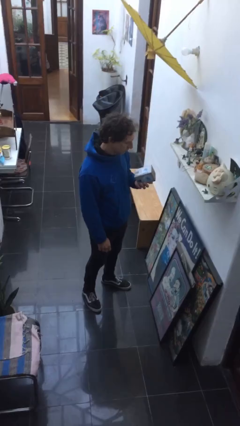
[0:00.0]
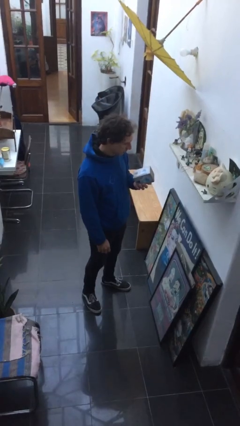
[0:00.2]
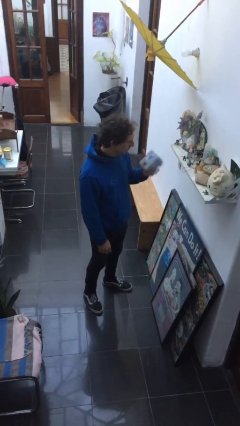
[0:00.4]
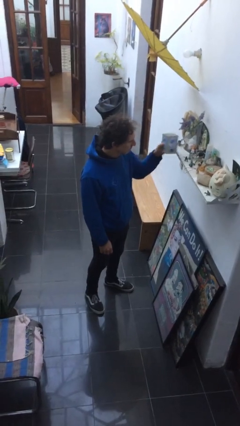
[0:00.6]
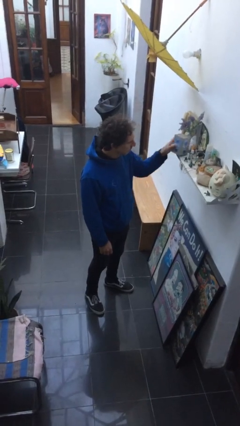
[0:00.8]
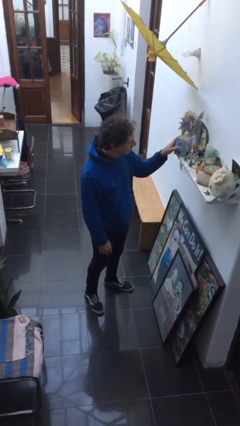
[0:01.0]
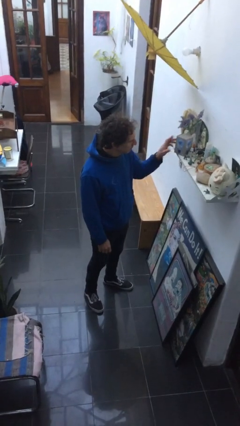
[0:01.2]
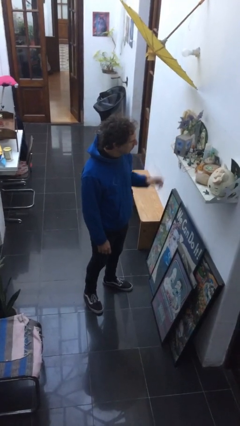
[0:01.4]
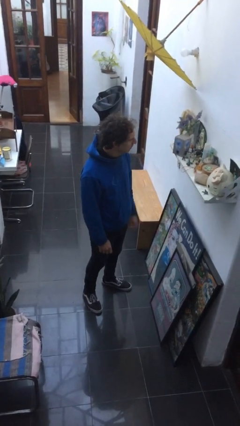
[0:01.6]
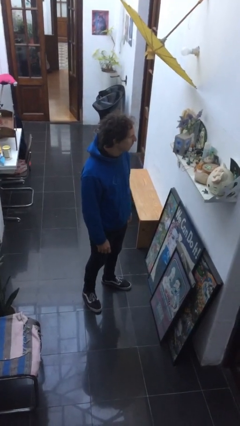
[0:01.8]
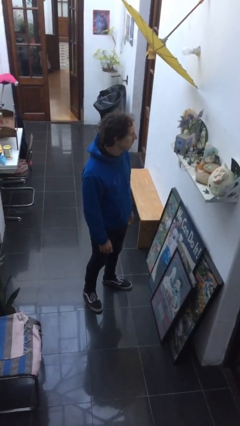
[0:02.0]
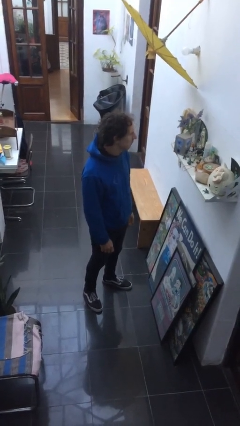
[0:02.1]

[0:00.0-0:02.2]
person puts down object on countertop

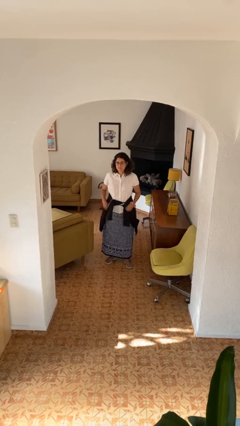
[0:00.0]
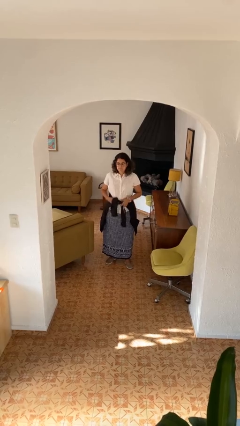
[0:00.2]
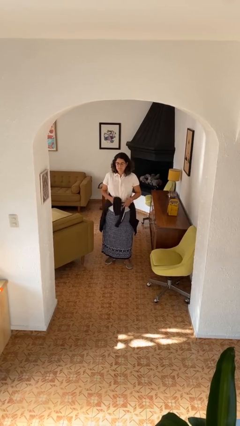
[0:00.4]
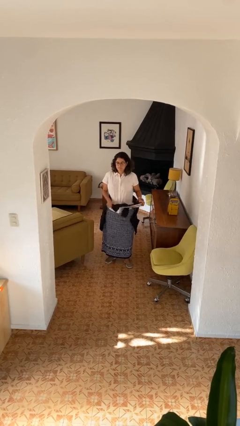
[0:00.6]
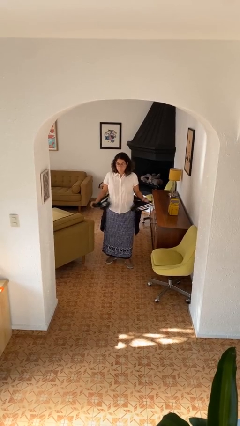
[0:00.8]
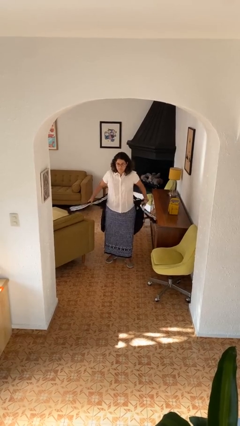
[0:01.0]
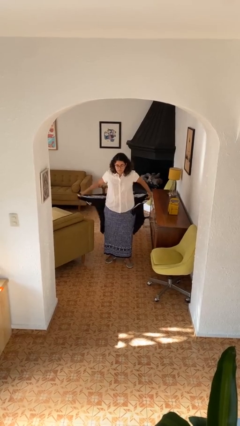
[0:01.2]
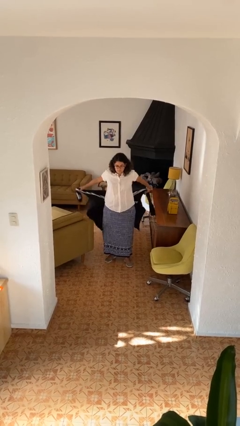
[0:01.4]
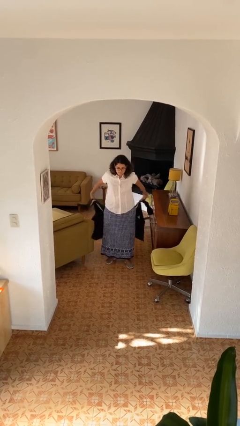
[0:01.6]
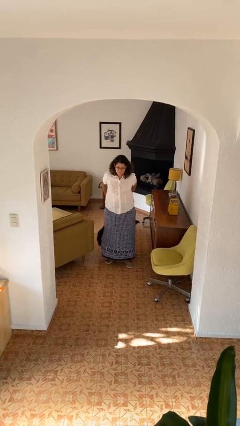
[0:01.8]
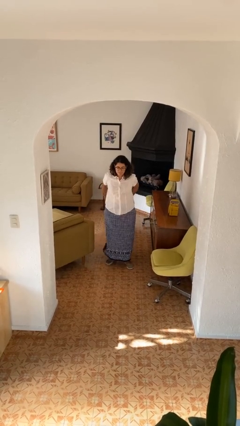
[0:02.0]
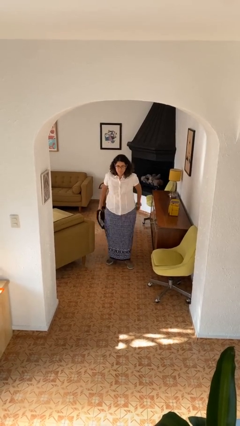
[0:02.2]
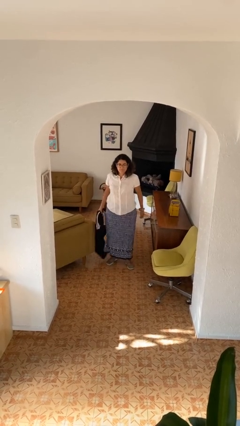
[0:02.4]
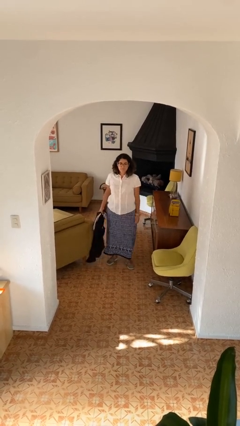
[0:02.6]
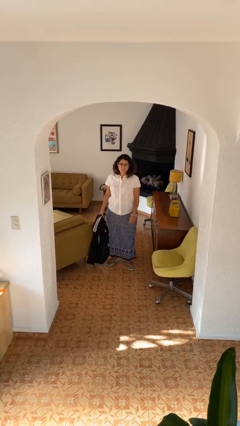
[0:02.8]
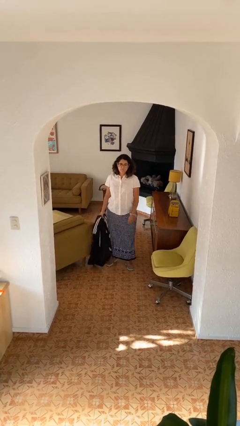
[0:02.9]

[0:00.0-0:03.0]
person unties jacket around waist

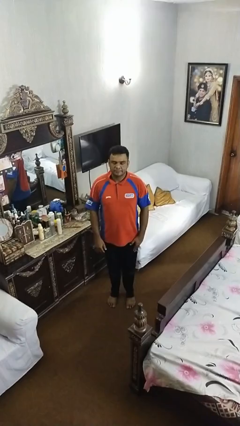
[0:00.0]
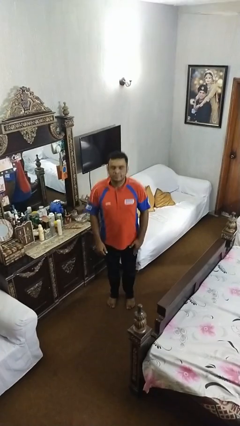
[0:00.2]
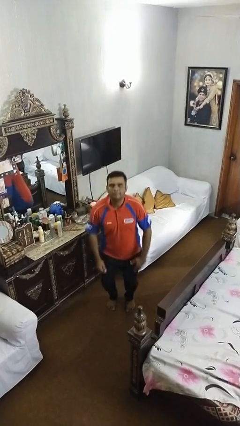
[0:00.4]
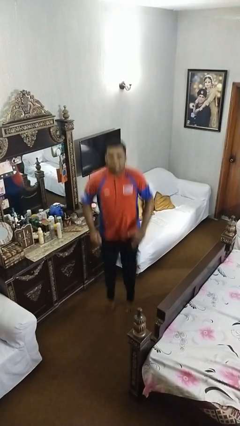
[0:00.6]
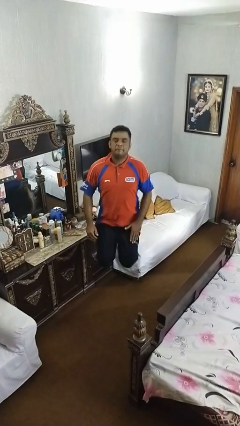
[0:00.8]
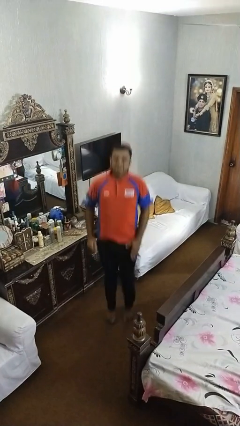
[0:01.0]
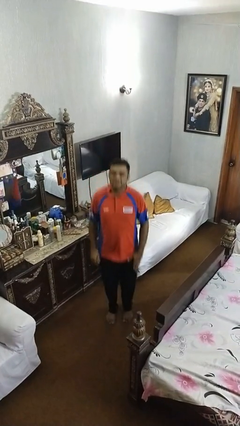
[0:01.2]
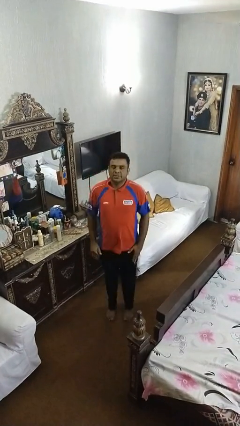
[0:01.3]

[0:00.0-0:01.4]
person jumps

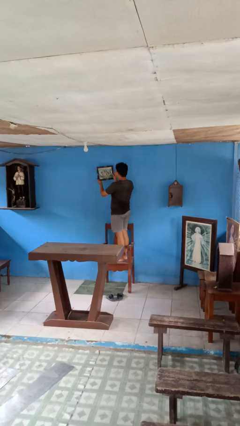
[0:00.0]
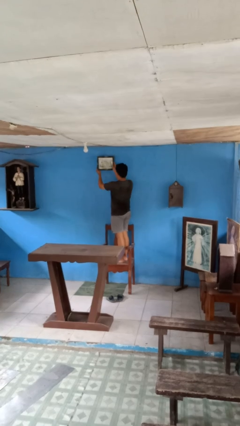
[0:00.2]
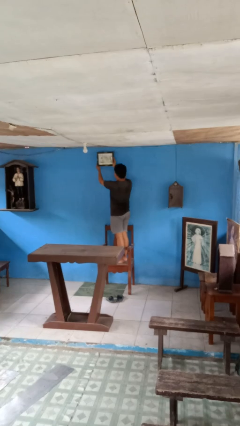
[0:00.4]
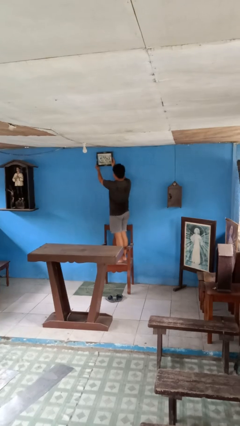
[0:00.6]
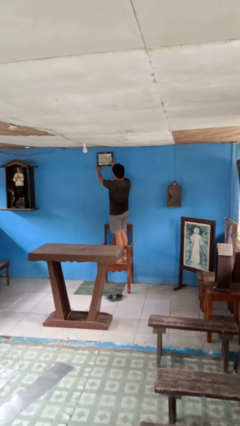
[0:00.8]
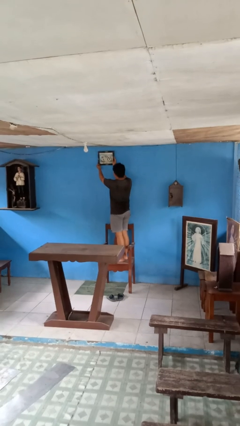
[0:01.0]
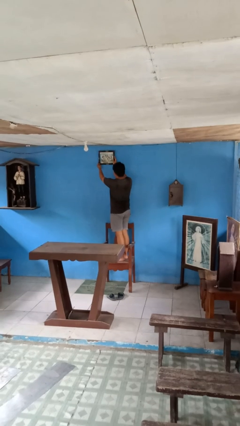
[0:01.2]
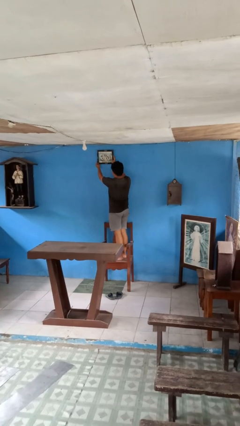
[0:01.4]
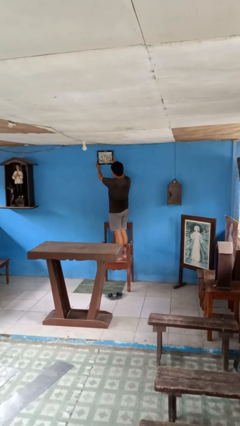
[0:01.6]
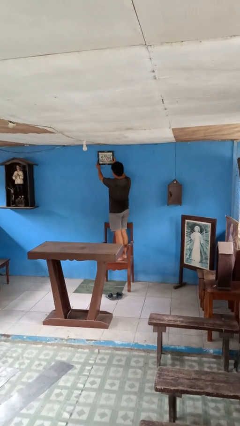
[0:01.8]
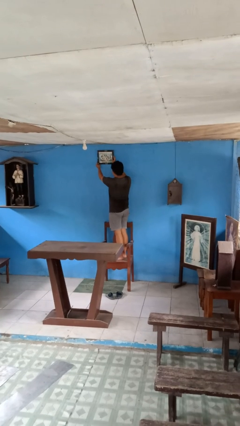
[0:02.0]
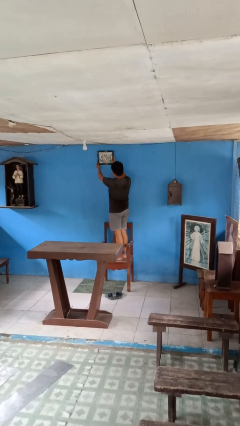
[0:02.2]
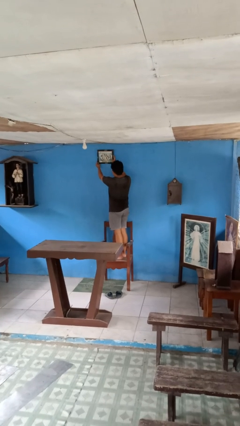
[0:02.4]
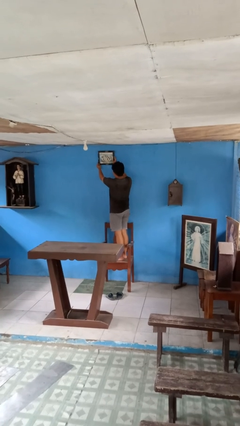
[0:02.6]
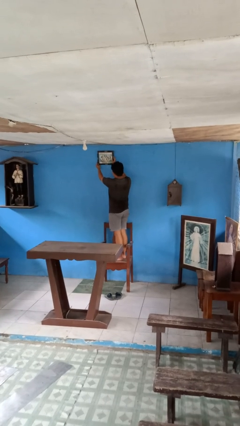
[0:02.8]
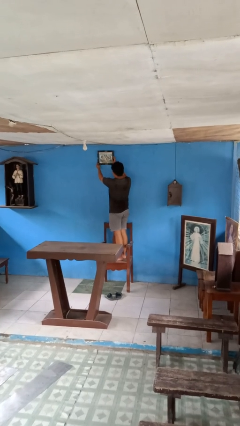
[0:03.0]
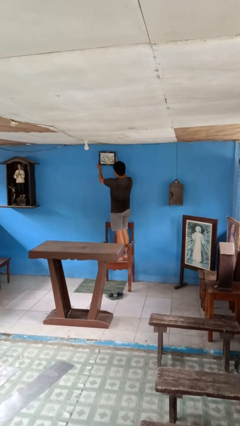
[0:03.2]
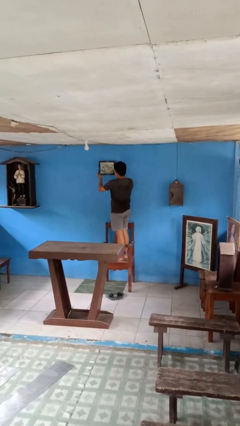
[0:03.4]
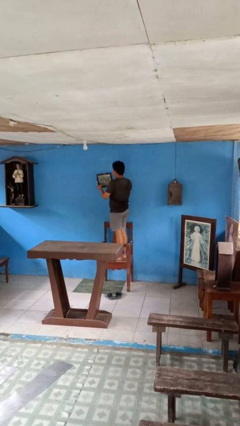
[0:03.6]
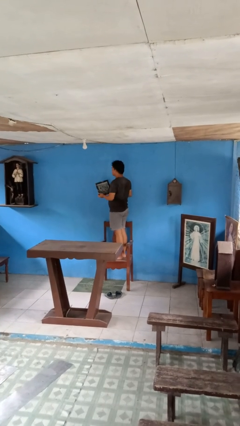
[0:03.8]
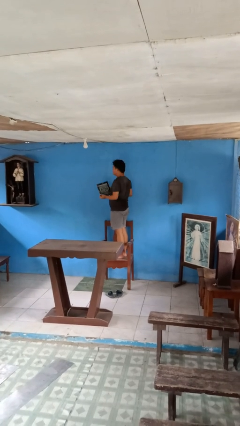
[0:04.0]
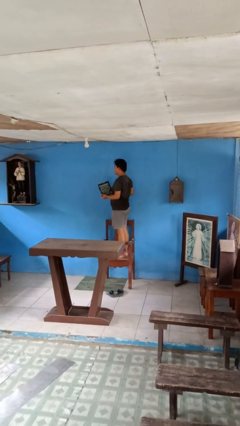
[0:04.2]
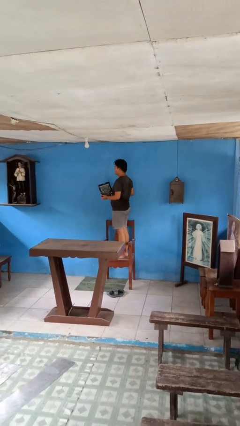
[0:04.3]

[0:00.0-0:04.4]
person puts up picture frame

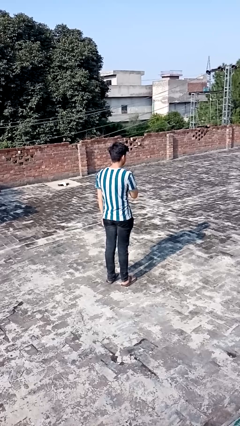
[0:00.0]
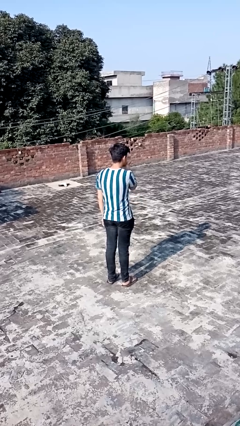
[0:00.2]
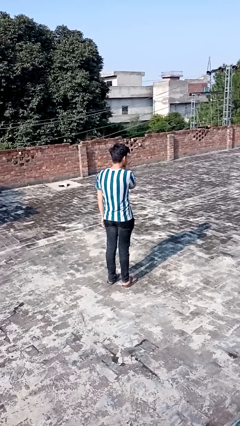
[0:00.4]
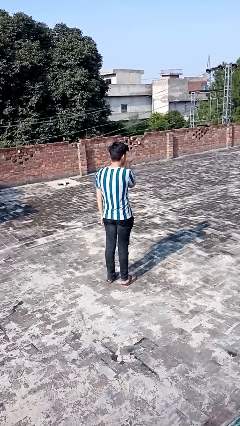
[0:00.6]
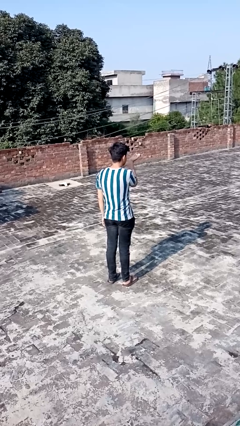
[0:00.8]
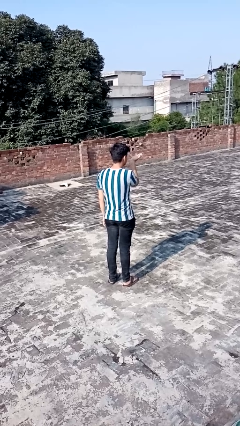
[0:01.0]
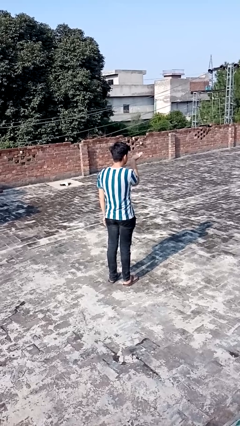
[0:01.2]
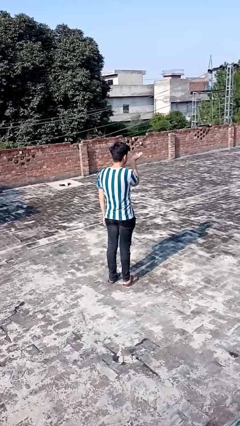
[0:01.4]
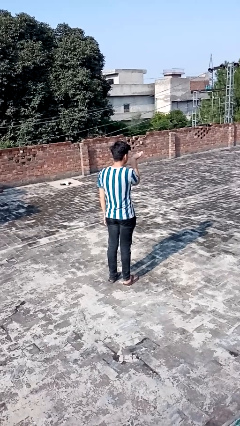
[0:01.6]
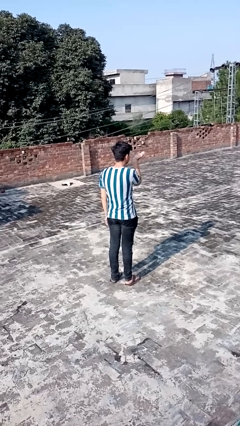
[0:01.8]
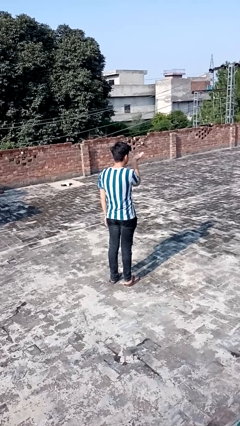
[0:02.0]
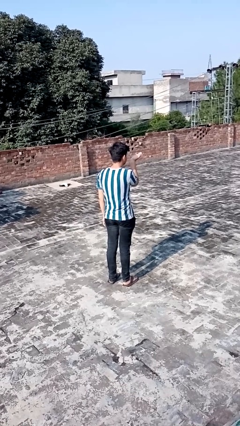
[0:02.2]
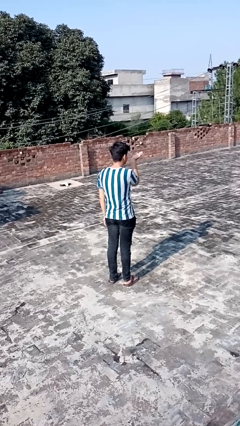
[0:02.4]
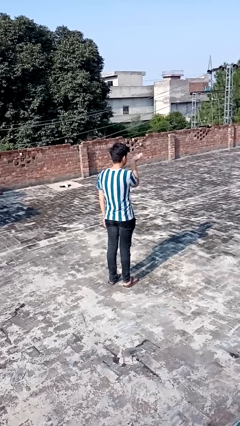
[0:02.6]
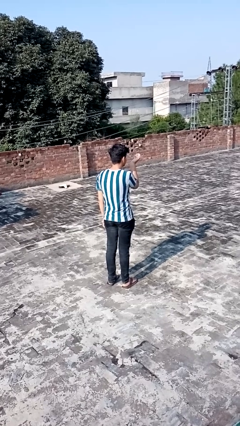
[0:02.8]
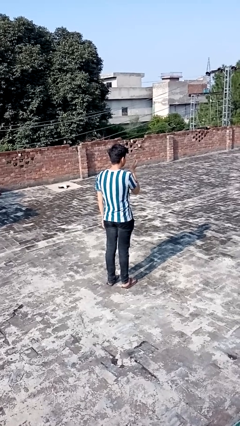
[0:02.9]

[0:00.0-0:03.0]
person gestures blow kiss

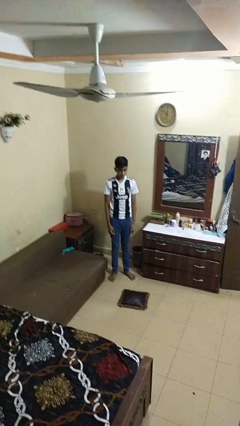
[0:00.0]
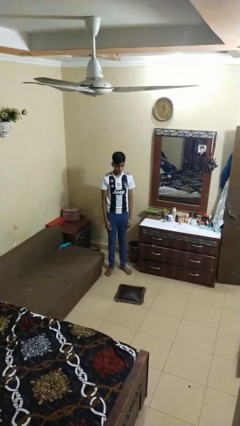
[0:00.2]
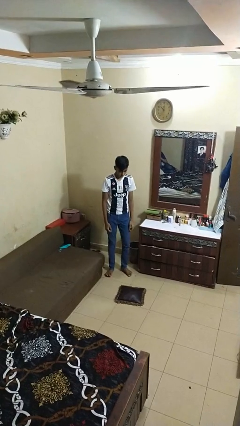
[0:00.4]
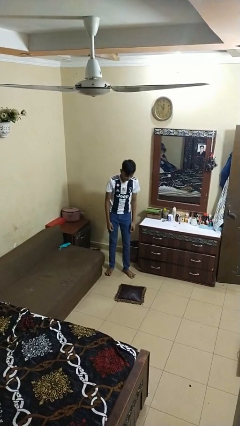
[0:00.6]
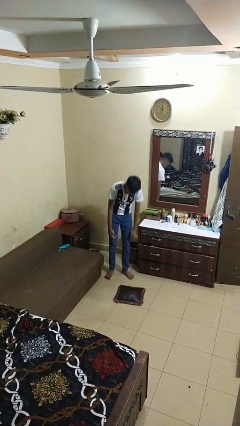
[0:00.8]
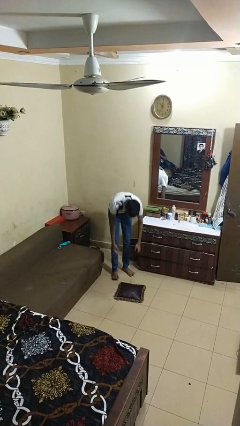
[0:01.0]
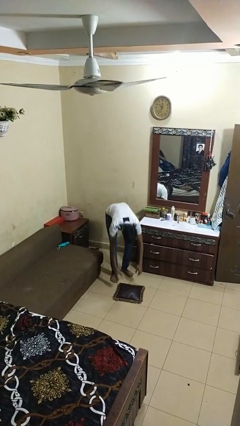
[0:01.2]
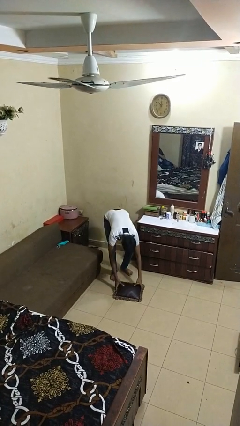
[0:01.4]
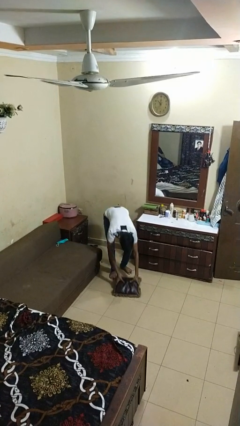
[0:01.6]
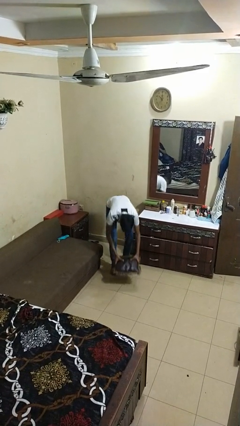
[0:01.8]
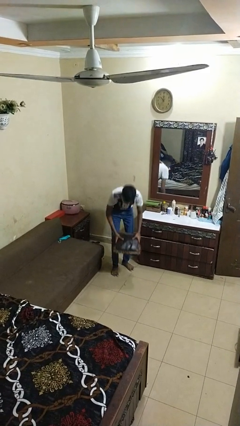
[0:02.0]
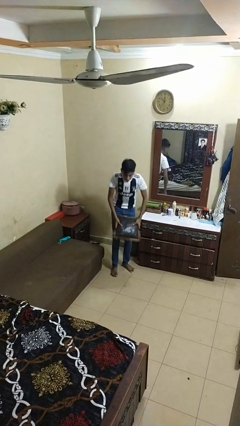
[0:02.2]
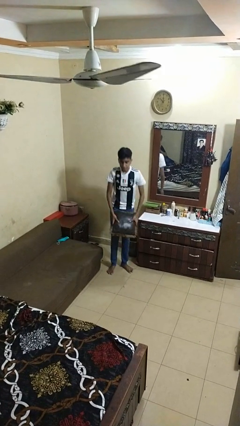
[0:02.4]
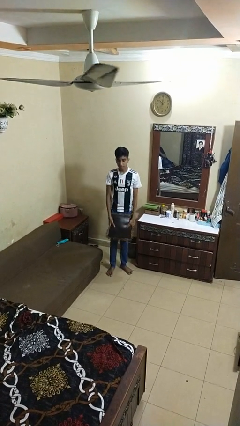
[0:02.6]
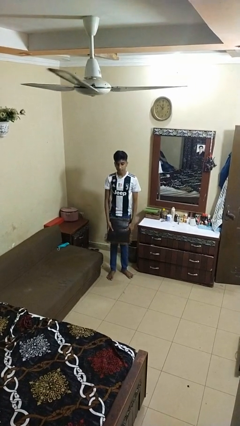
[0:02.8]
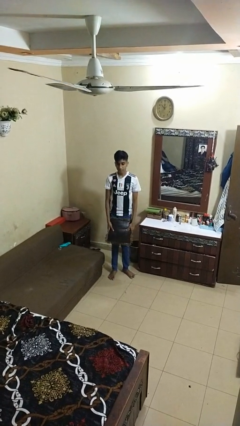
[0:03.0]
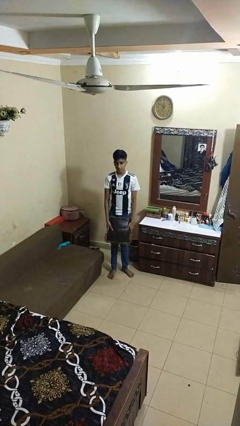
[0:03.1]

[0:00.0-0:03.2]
person picks up object from floor
